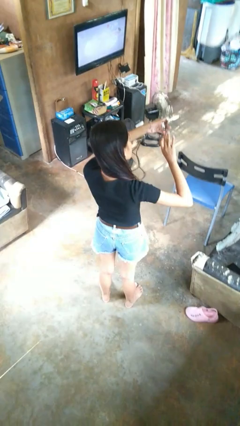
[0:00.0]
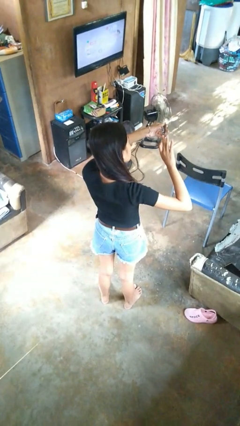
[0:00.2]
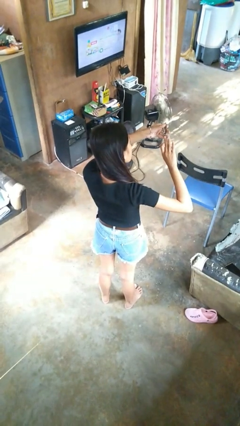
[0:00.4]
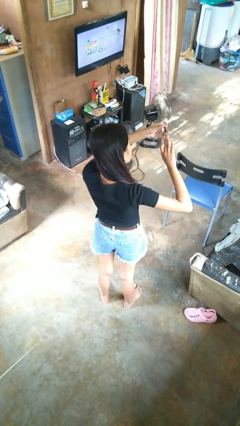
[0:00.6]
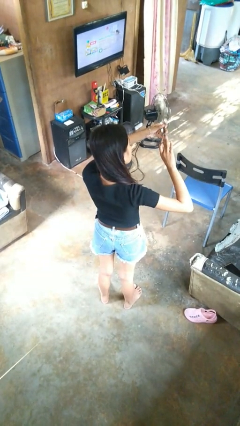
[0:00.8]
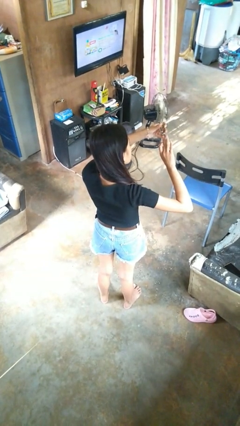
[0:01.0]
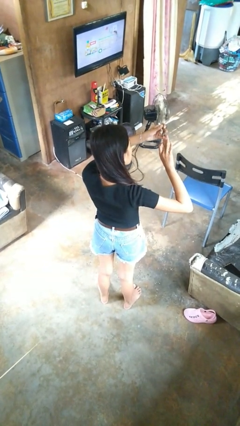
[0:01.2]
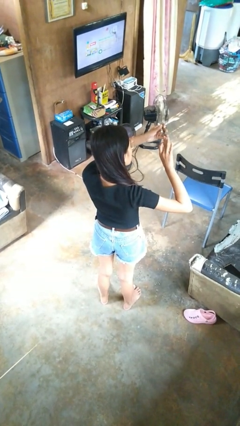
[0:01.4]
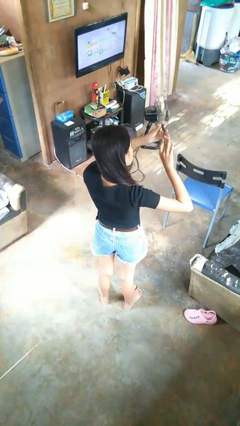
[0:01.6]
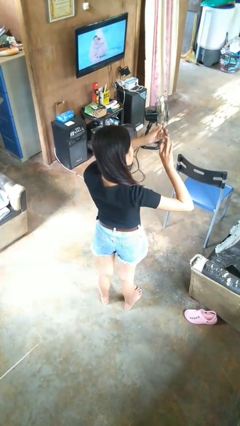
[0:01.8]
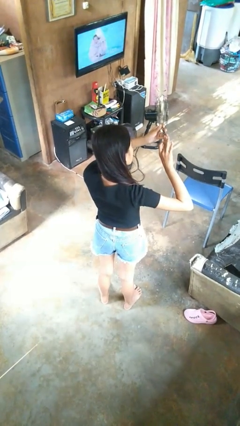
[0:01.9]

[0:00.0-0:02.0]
person clips fingernails

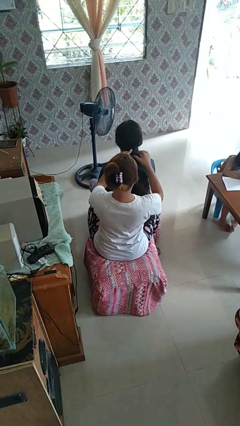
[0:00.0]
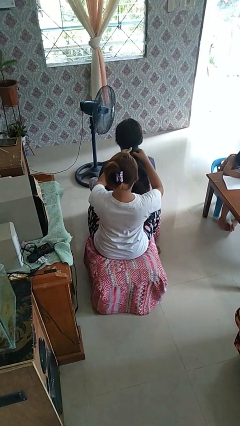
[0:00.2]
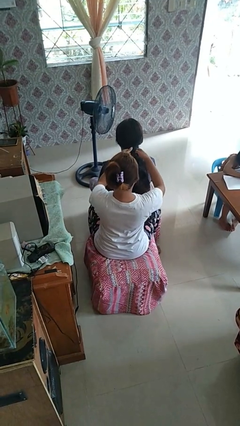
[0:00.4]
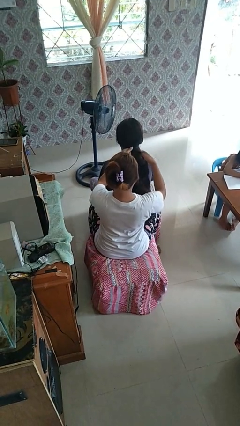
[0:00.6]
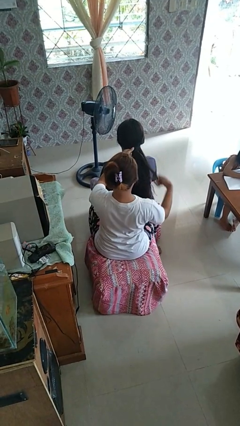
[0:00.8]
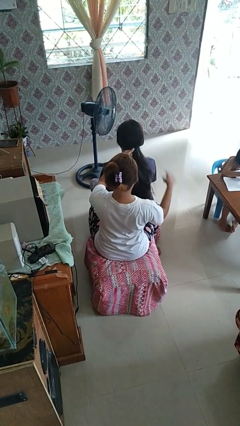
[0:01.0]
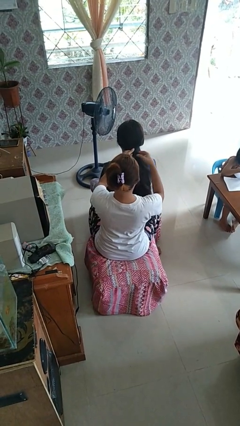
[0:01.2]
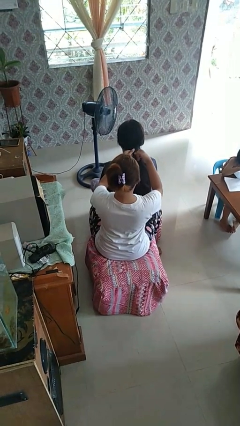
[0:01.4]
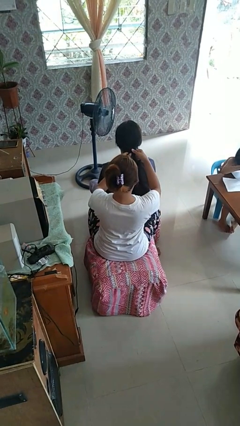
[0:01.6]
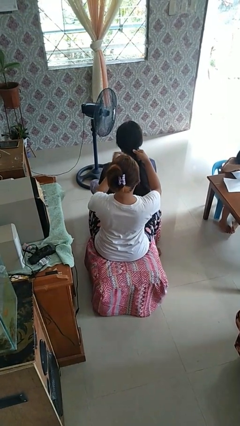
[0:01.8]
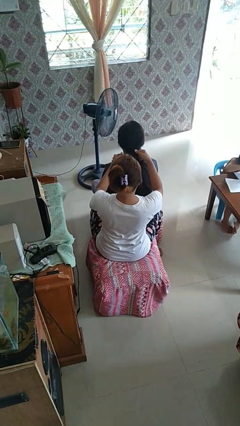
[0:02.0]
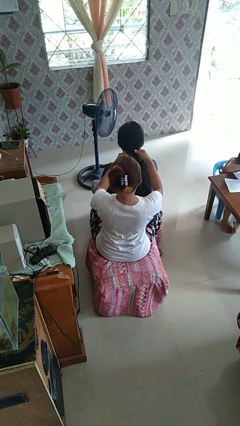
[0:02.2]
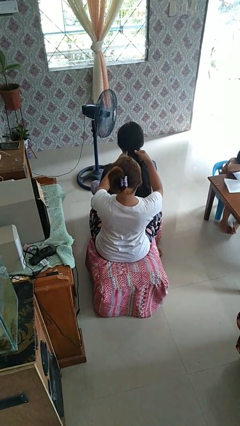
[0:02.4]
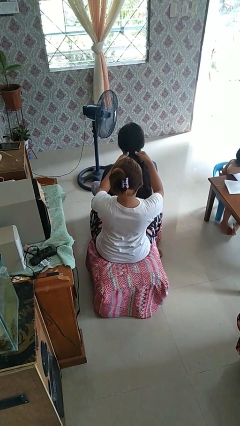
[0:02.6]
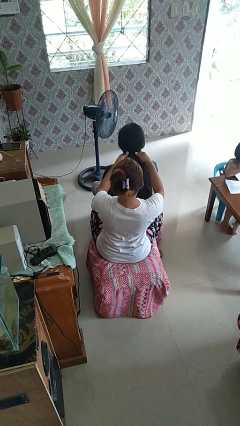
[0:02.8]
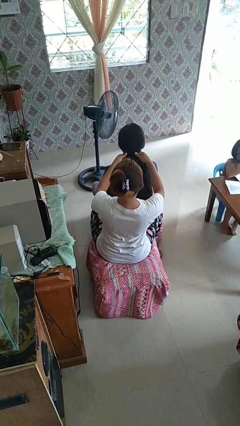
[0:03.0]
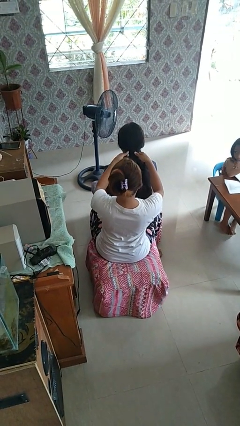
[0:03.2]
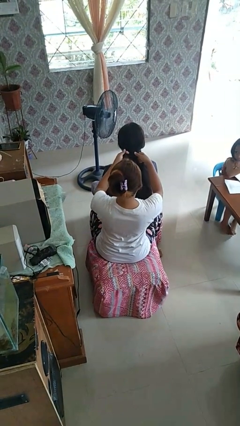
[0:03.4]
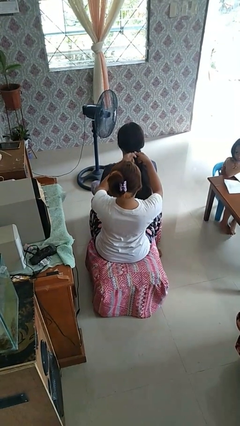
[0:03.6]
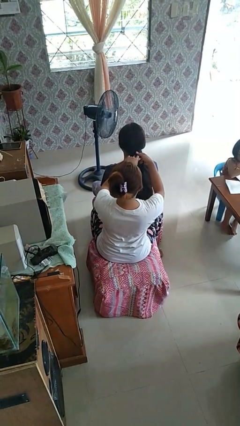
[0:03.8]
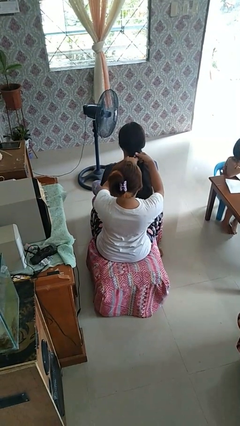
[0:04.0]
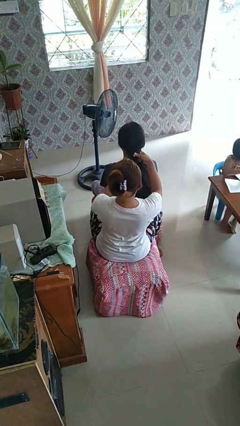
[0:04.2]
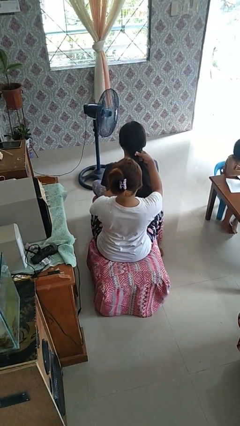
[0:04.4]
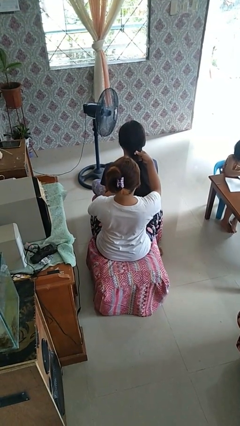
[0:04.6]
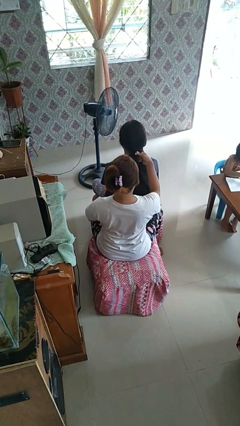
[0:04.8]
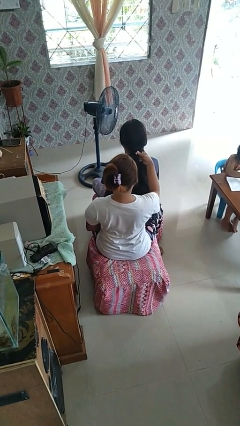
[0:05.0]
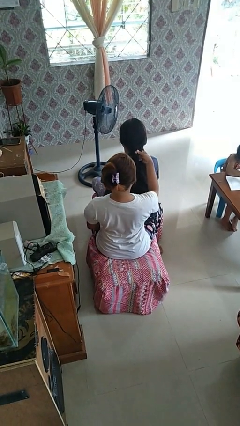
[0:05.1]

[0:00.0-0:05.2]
person braids hair of person

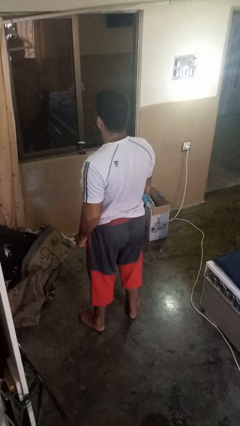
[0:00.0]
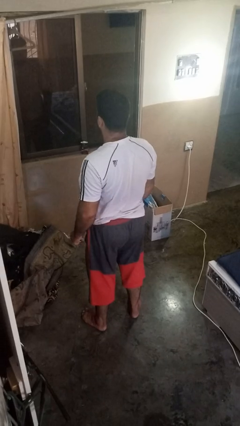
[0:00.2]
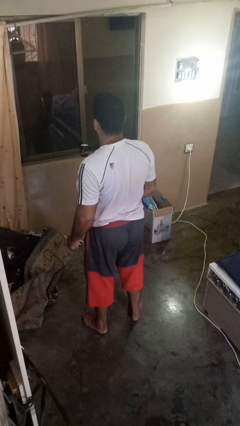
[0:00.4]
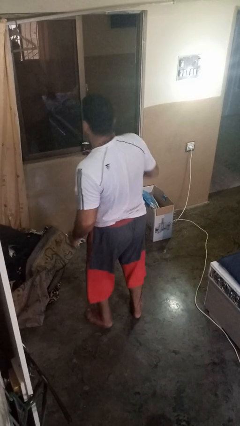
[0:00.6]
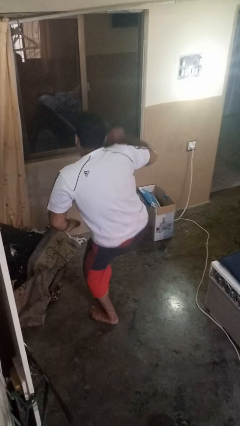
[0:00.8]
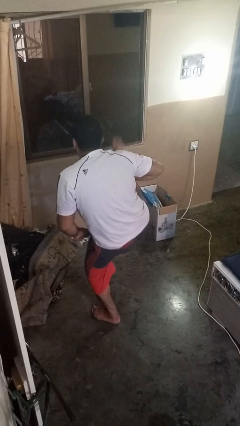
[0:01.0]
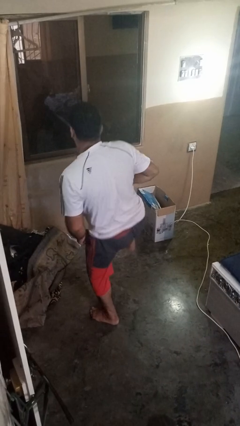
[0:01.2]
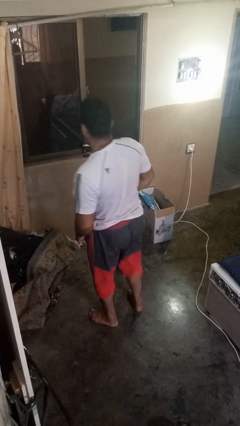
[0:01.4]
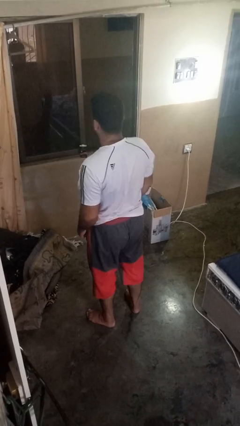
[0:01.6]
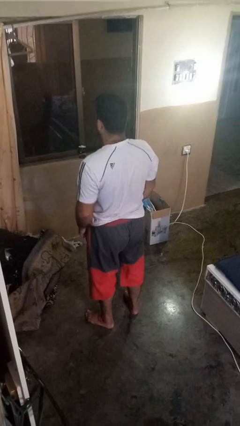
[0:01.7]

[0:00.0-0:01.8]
person karate kicks

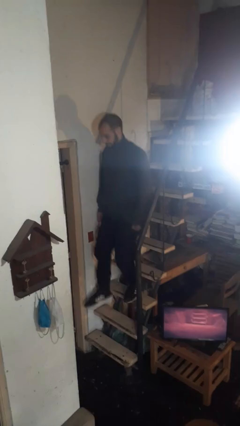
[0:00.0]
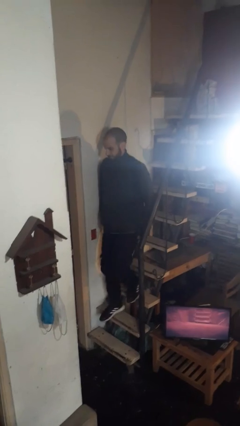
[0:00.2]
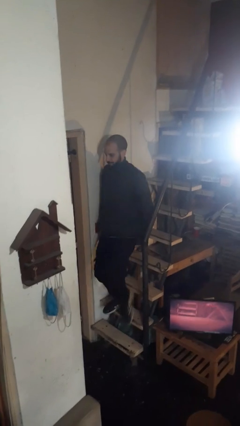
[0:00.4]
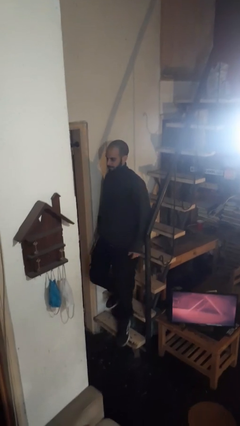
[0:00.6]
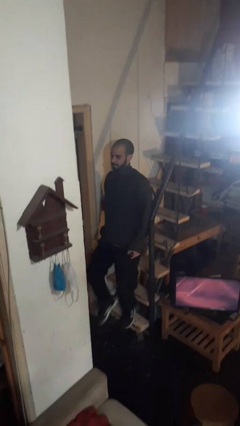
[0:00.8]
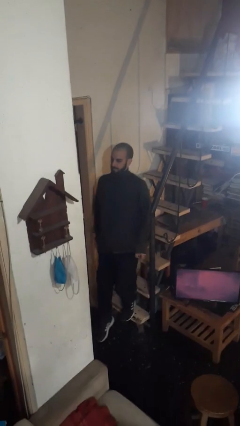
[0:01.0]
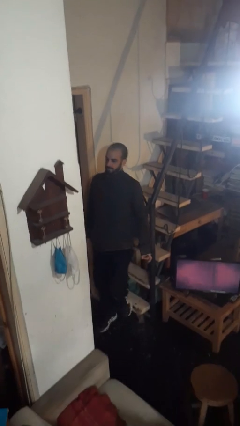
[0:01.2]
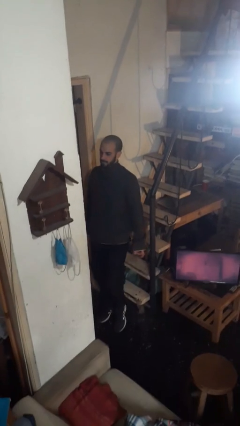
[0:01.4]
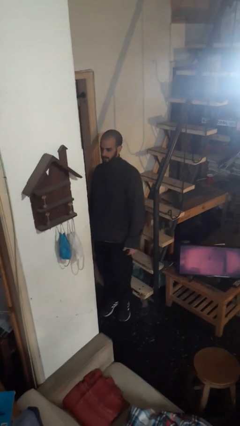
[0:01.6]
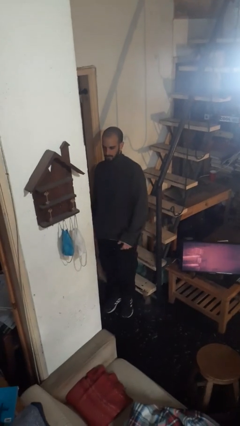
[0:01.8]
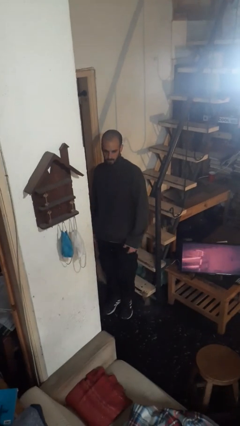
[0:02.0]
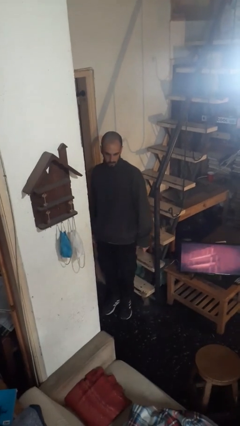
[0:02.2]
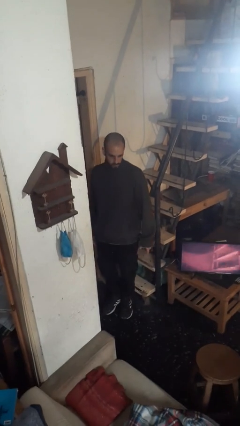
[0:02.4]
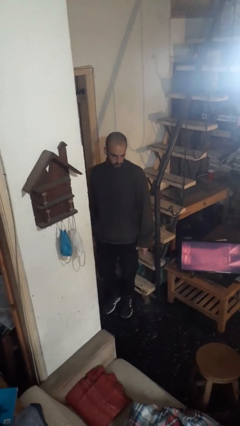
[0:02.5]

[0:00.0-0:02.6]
person climbs down stairs

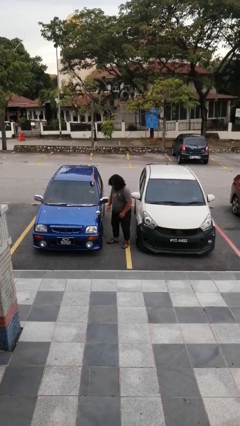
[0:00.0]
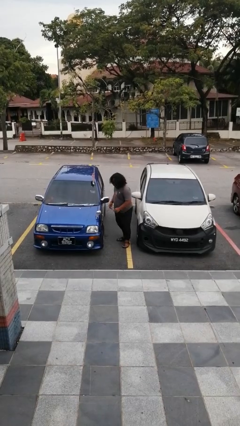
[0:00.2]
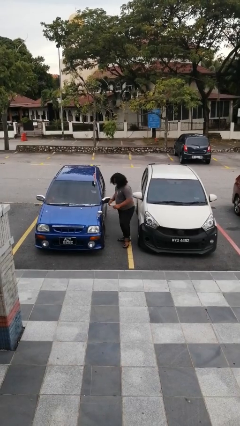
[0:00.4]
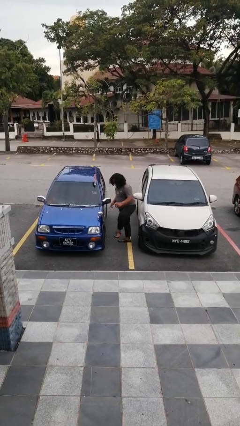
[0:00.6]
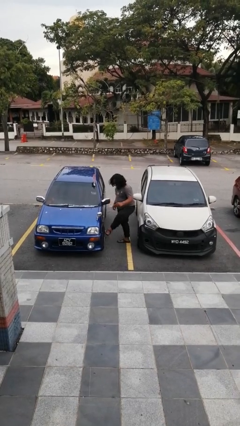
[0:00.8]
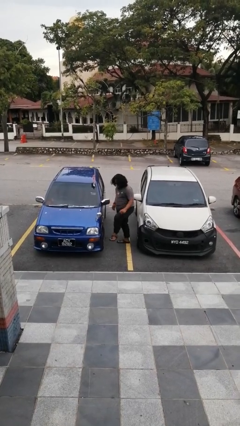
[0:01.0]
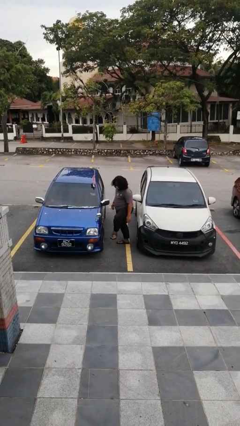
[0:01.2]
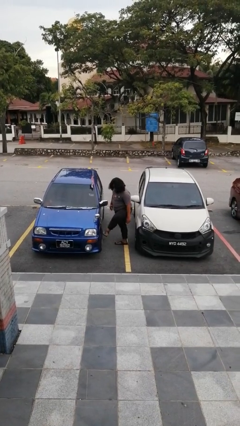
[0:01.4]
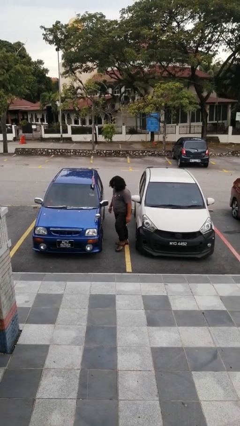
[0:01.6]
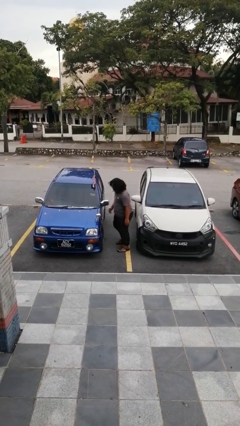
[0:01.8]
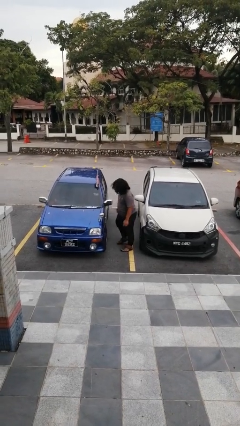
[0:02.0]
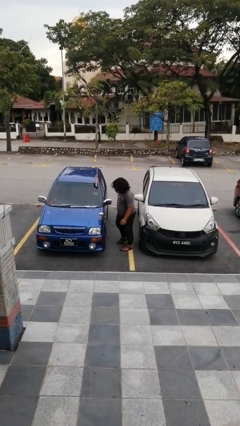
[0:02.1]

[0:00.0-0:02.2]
person kicks car tires

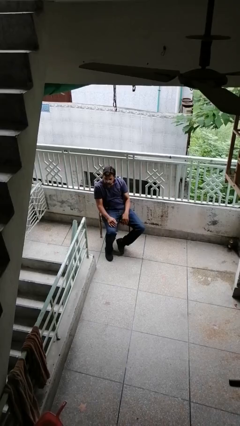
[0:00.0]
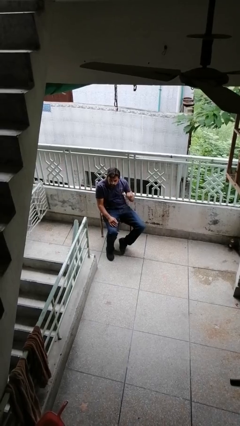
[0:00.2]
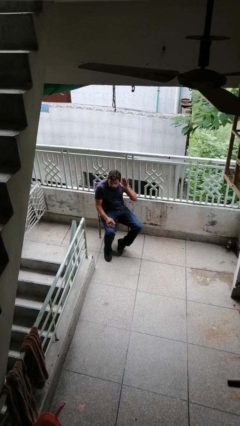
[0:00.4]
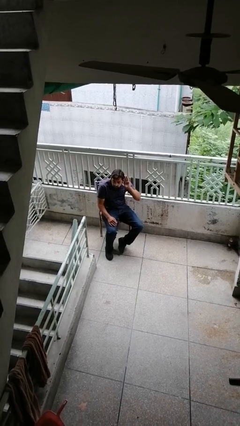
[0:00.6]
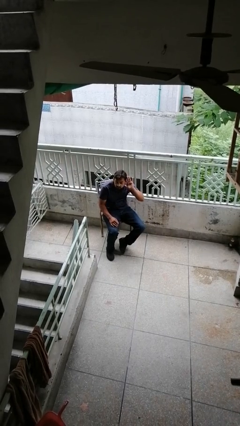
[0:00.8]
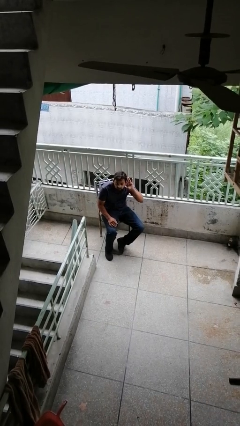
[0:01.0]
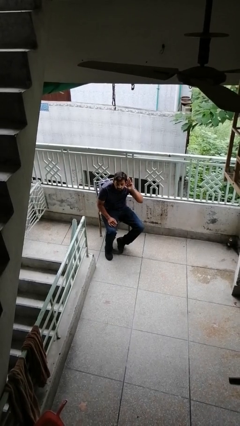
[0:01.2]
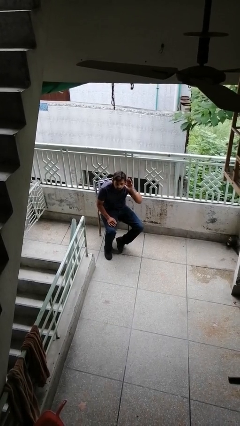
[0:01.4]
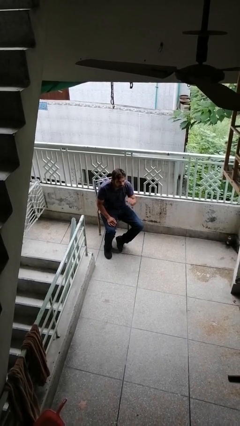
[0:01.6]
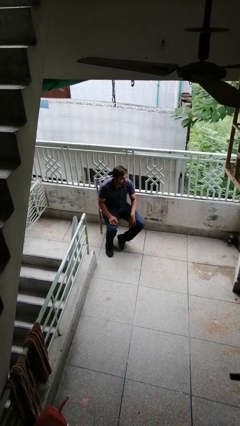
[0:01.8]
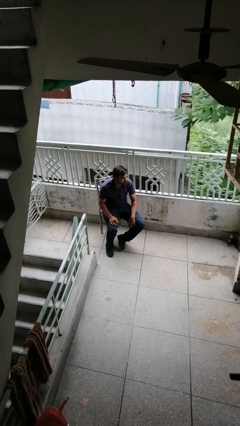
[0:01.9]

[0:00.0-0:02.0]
person gestures listen closely

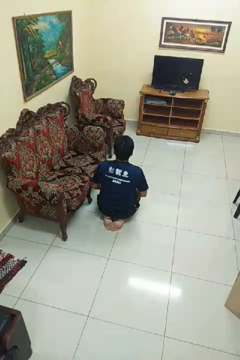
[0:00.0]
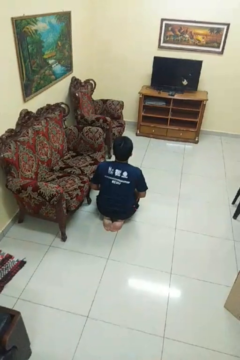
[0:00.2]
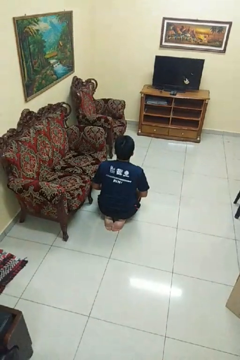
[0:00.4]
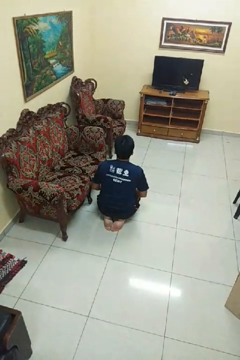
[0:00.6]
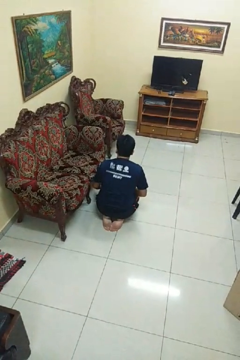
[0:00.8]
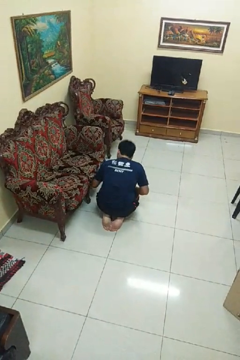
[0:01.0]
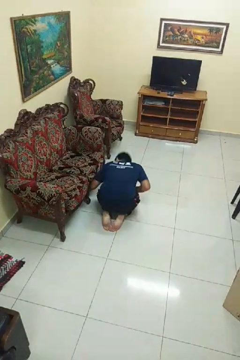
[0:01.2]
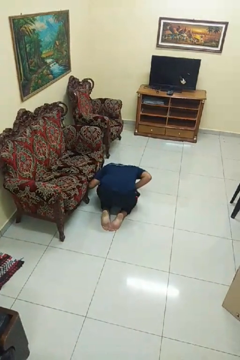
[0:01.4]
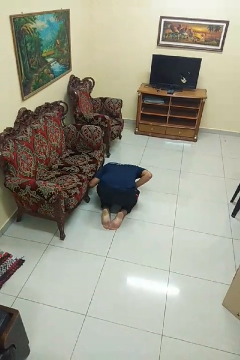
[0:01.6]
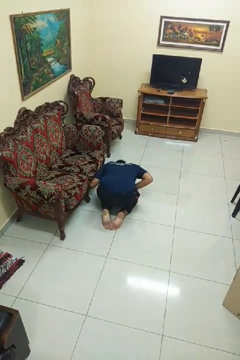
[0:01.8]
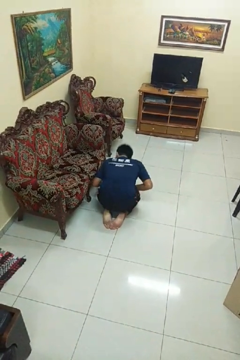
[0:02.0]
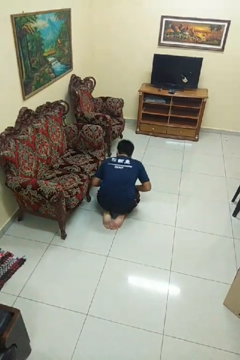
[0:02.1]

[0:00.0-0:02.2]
person searches under couch
